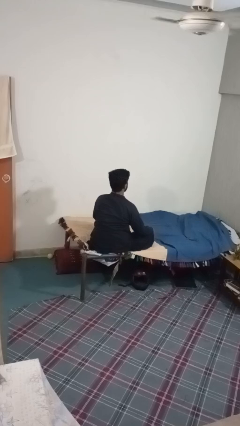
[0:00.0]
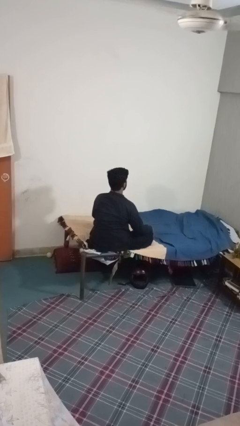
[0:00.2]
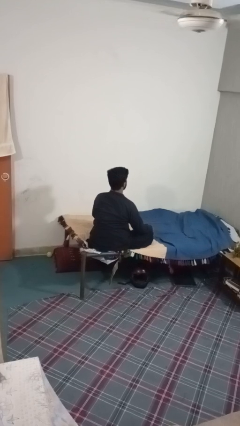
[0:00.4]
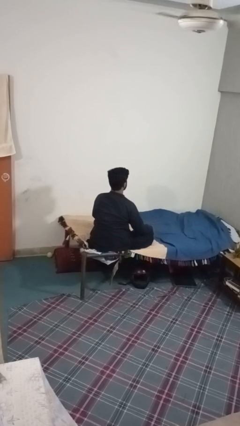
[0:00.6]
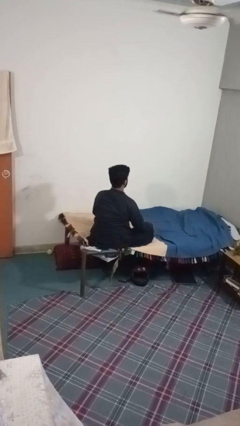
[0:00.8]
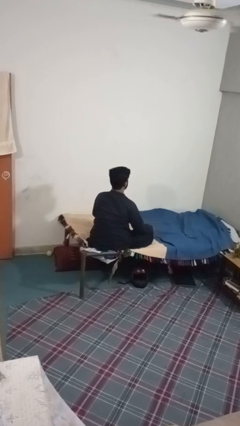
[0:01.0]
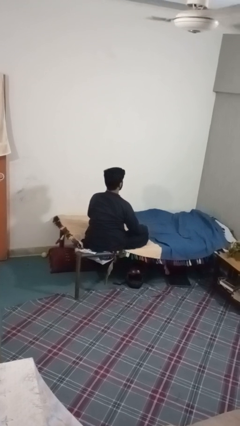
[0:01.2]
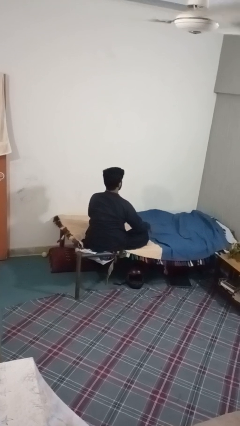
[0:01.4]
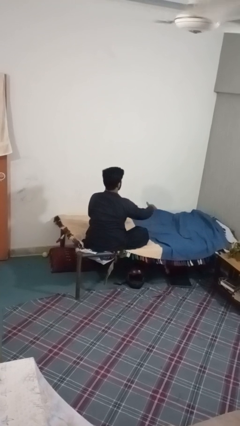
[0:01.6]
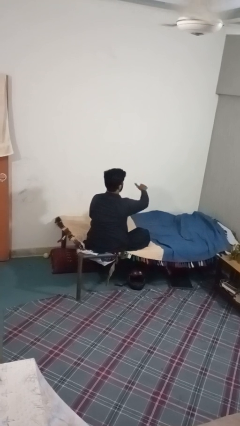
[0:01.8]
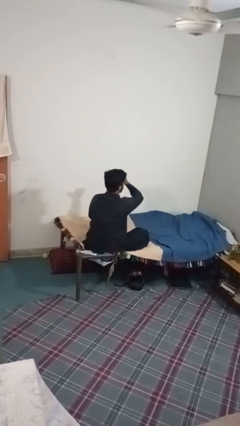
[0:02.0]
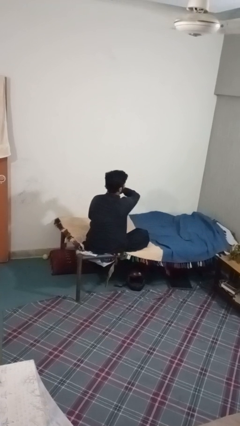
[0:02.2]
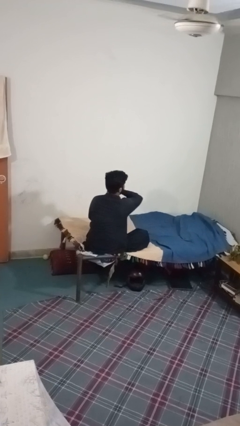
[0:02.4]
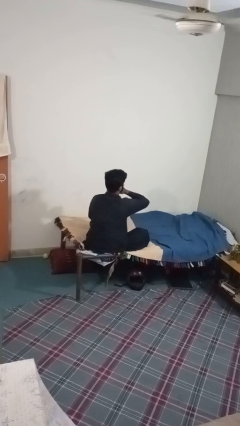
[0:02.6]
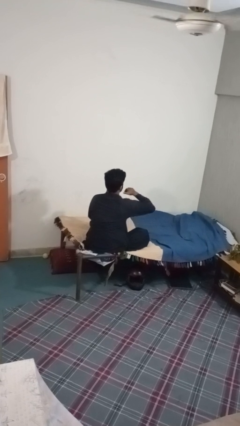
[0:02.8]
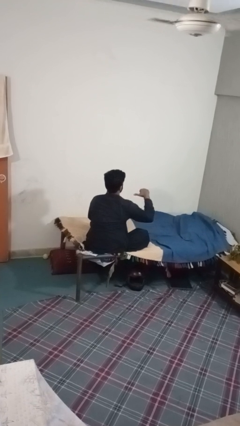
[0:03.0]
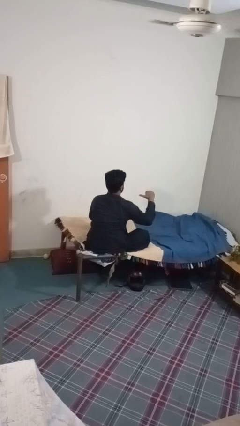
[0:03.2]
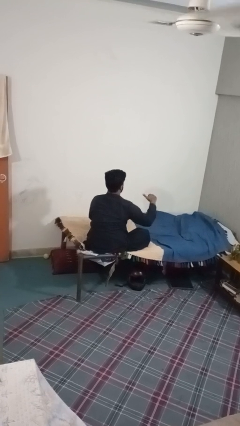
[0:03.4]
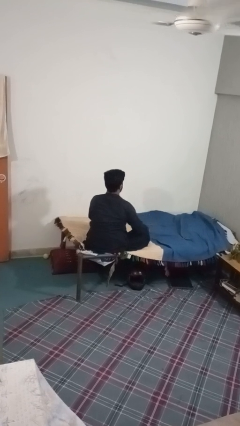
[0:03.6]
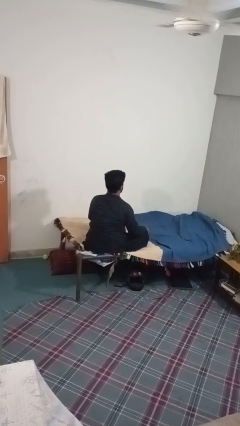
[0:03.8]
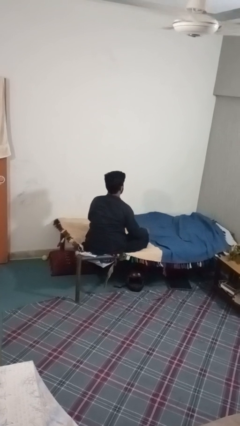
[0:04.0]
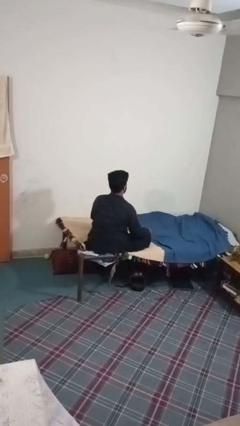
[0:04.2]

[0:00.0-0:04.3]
person gestures cut

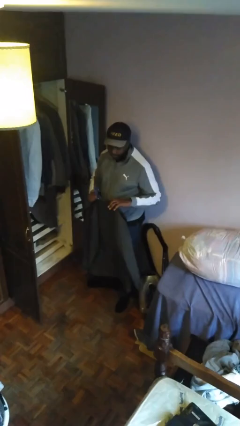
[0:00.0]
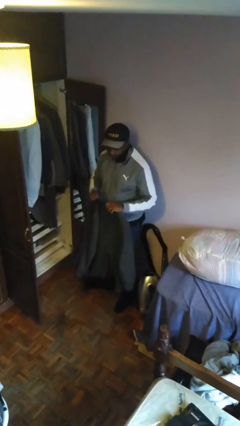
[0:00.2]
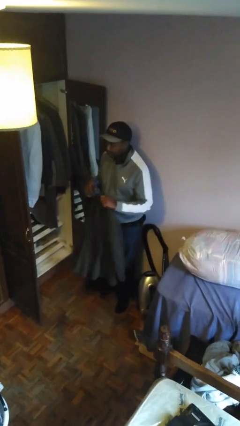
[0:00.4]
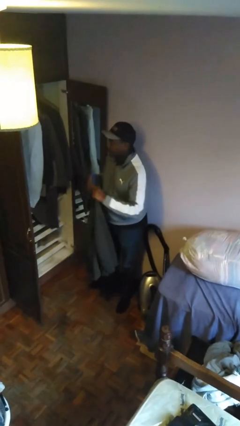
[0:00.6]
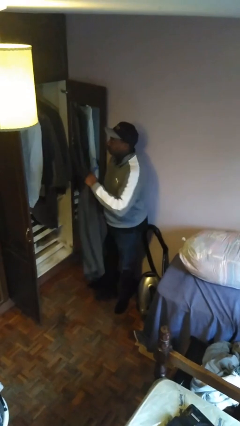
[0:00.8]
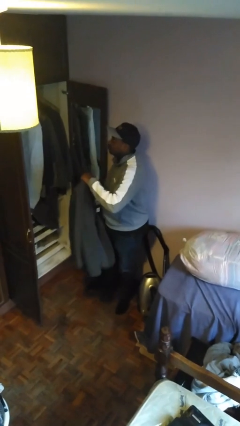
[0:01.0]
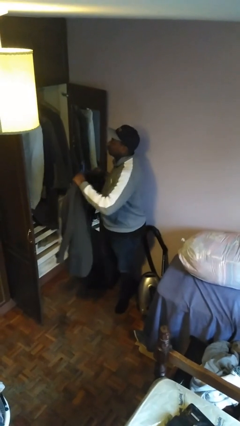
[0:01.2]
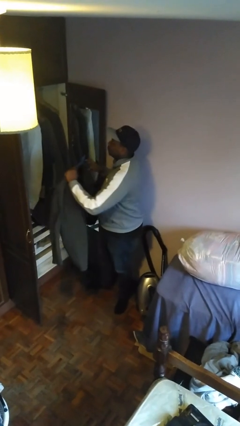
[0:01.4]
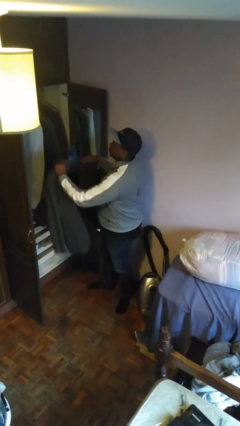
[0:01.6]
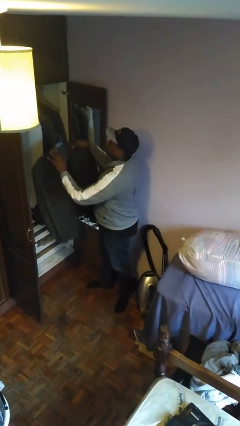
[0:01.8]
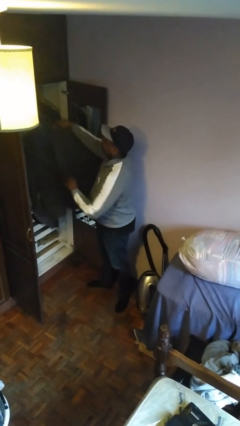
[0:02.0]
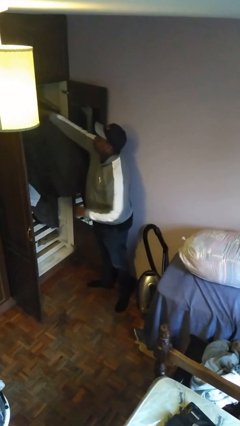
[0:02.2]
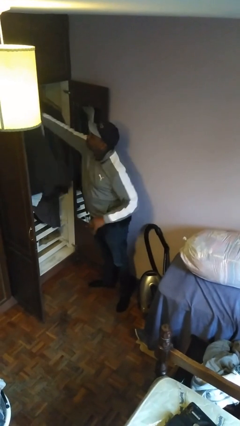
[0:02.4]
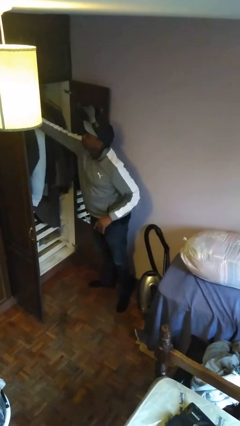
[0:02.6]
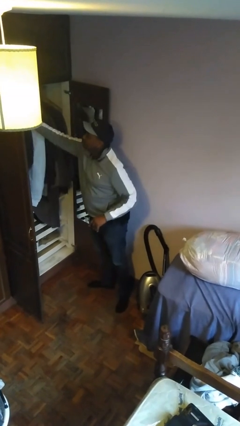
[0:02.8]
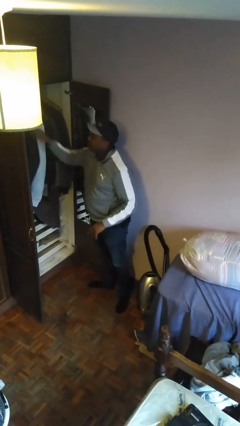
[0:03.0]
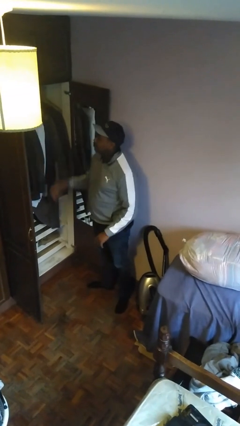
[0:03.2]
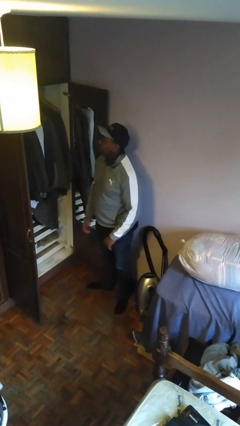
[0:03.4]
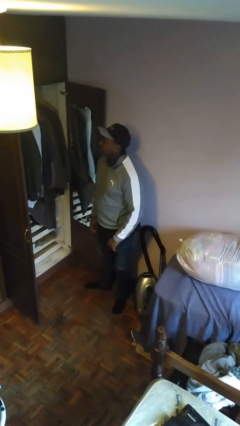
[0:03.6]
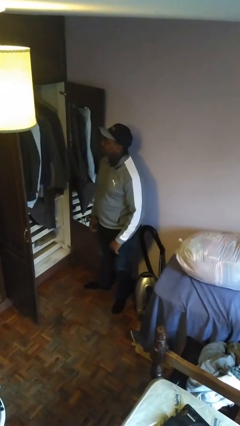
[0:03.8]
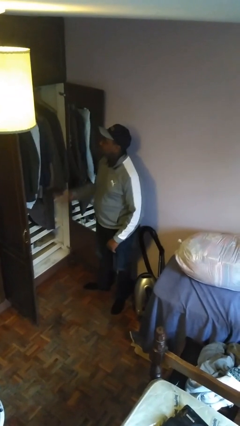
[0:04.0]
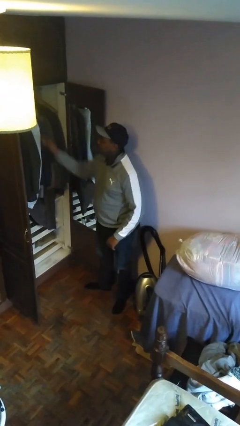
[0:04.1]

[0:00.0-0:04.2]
person puts clothes into closet

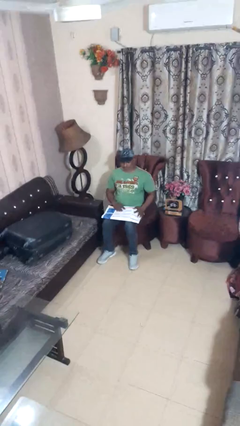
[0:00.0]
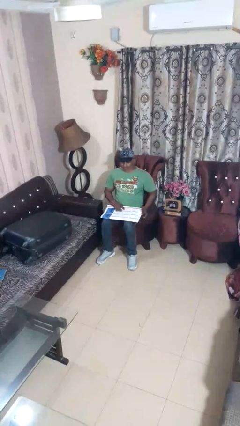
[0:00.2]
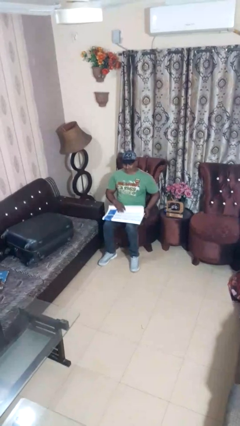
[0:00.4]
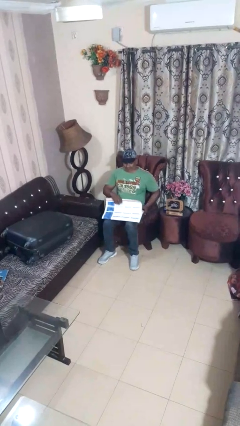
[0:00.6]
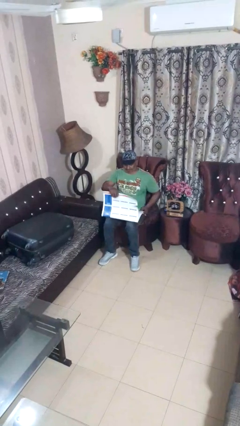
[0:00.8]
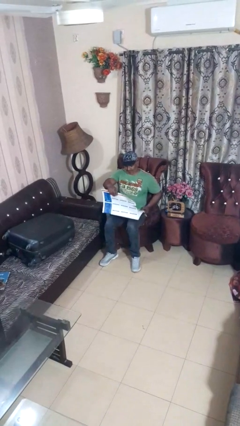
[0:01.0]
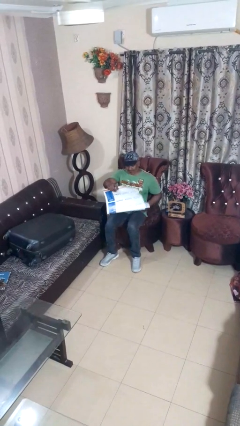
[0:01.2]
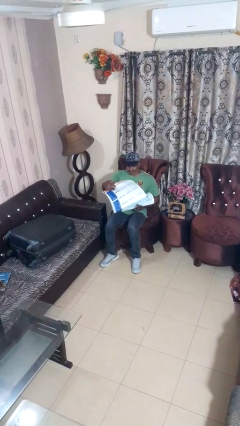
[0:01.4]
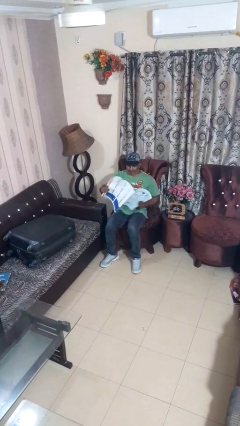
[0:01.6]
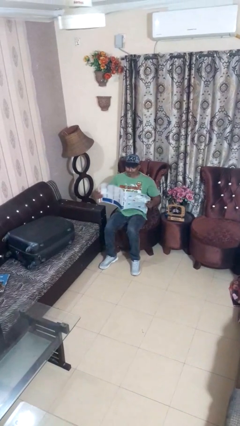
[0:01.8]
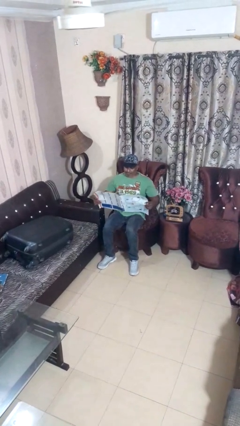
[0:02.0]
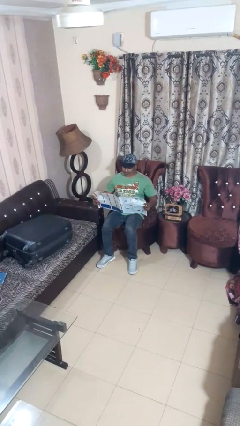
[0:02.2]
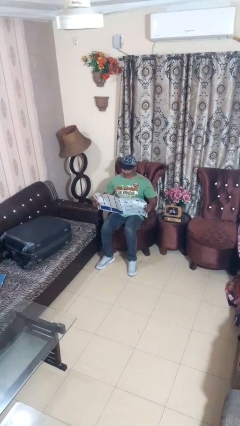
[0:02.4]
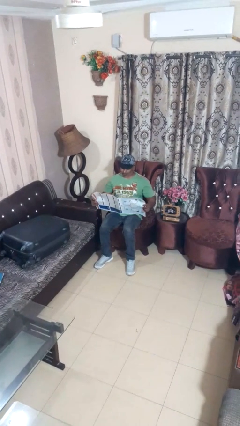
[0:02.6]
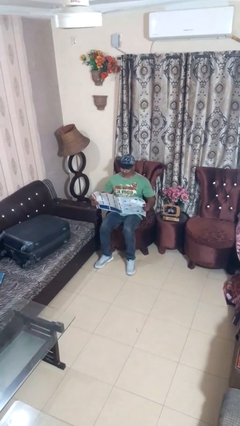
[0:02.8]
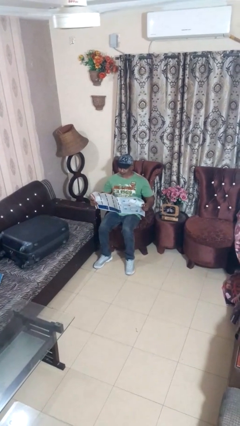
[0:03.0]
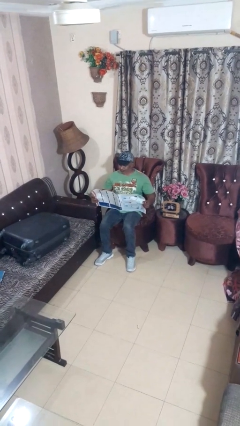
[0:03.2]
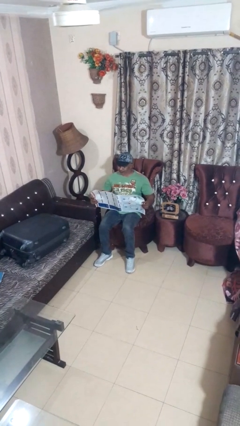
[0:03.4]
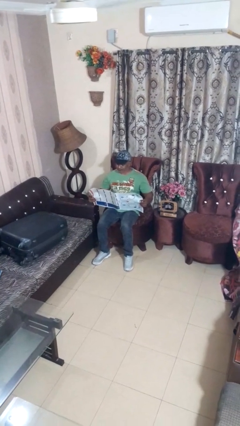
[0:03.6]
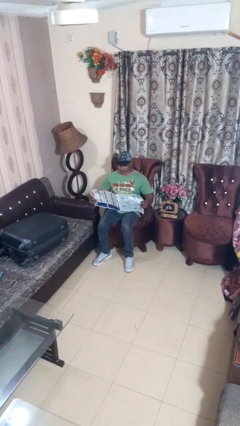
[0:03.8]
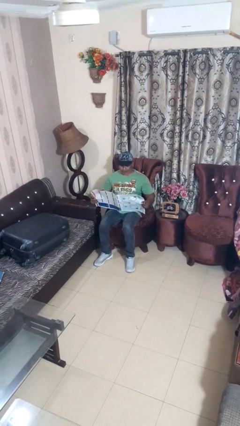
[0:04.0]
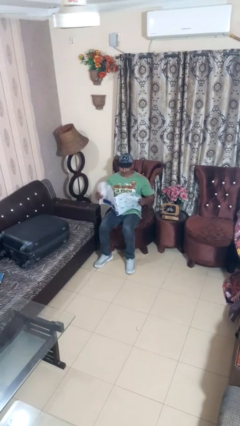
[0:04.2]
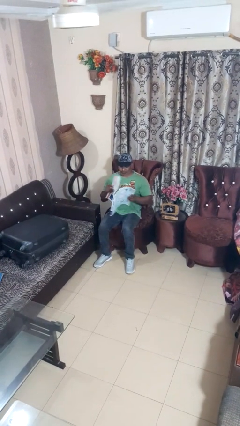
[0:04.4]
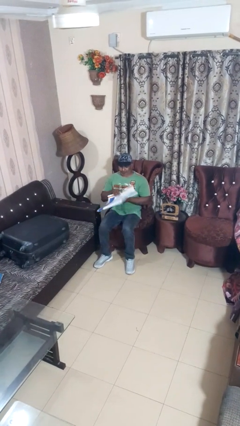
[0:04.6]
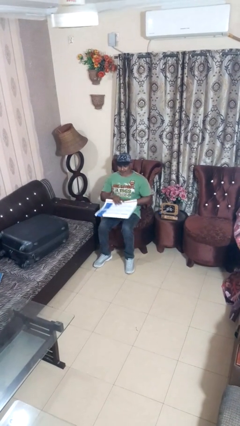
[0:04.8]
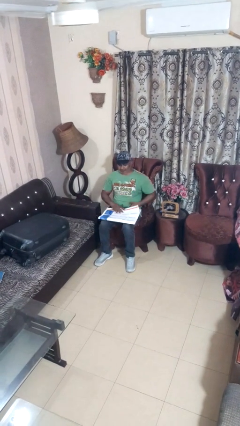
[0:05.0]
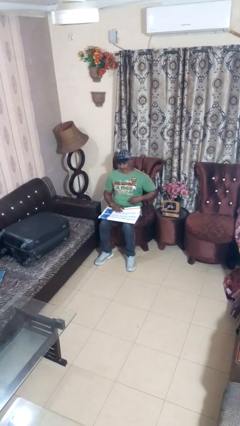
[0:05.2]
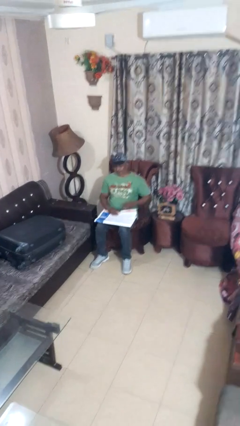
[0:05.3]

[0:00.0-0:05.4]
person reads newspaper

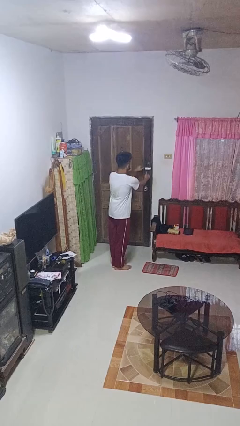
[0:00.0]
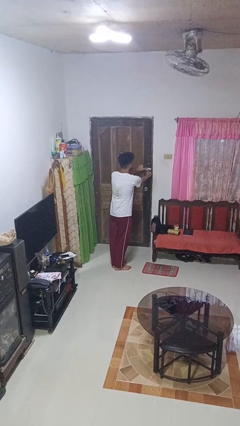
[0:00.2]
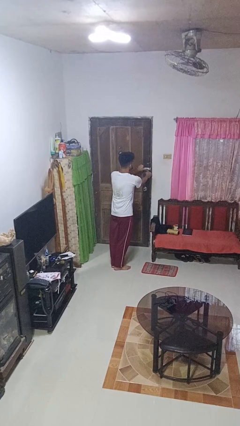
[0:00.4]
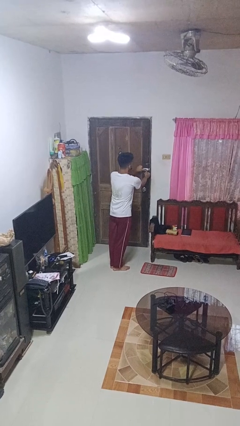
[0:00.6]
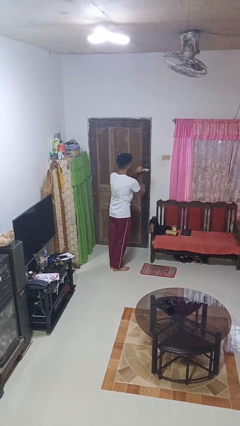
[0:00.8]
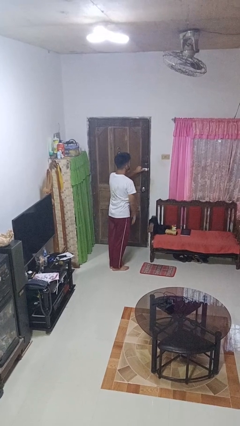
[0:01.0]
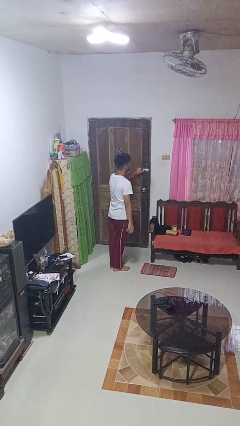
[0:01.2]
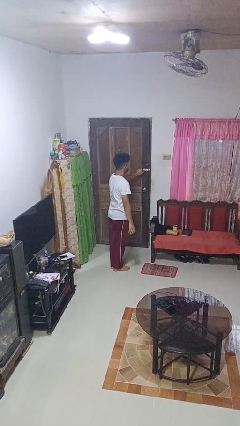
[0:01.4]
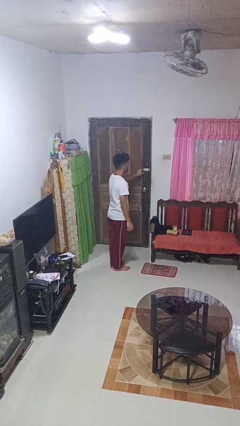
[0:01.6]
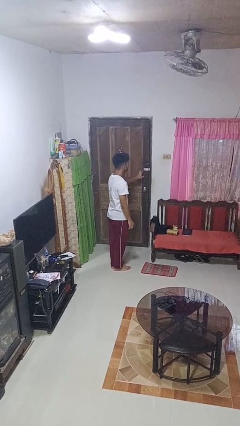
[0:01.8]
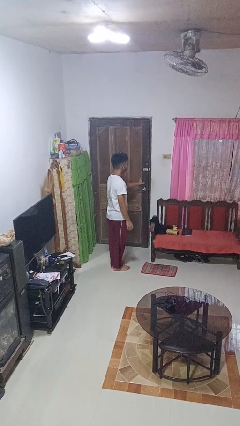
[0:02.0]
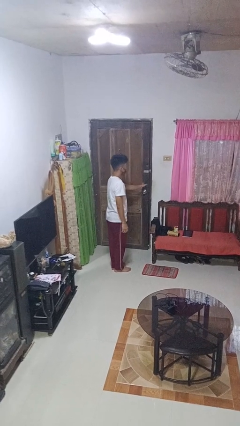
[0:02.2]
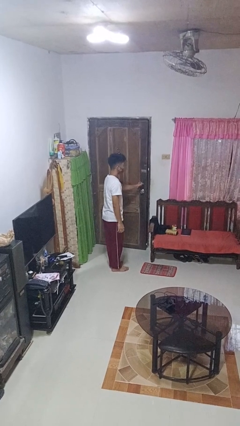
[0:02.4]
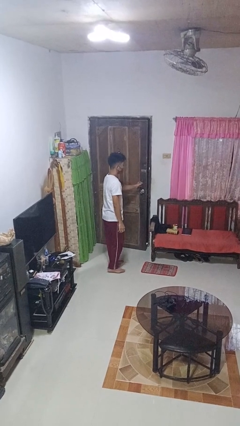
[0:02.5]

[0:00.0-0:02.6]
person unlocks door with keys

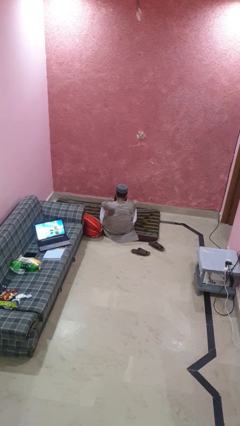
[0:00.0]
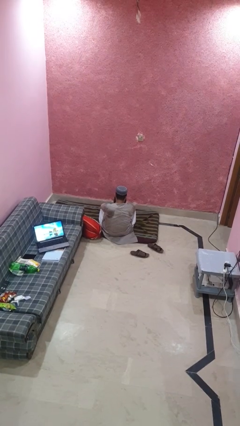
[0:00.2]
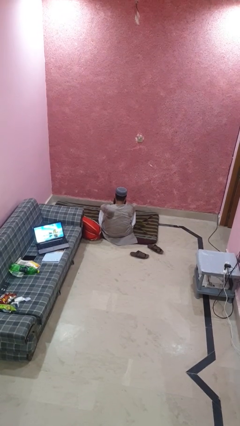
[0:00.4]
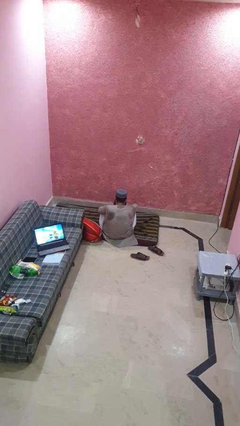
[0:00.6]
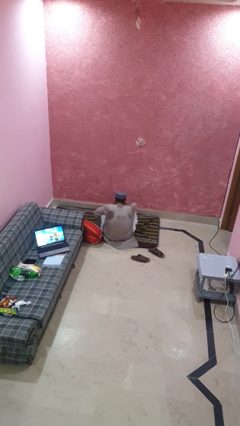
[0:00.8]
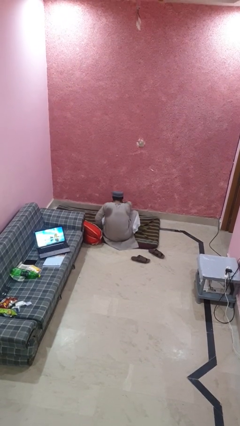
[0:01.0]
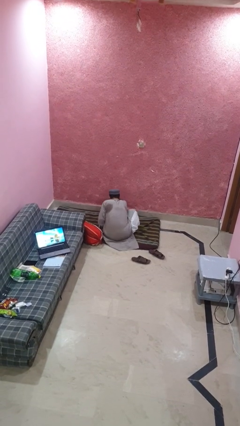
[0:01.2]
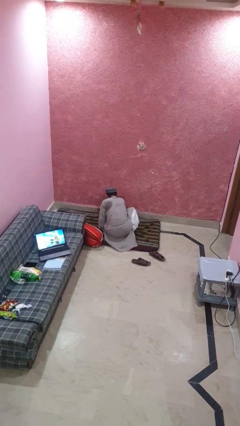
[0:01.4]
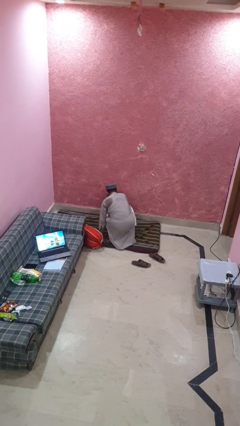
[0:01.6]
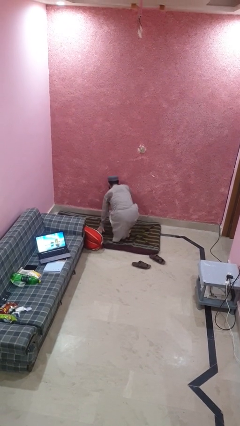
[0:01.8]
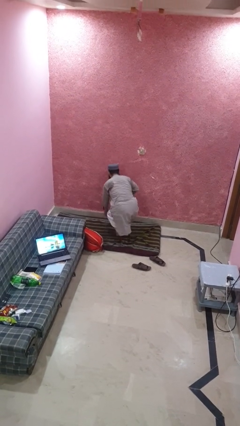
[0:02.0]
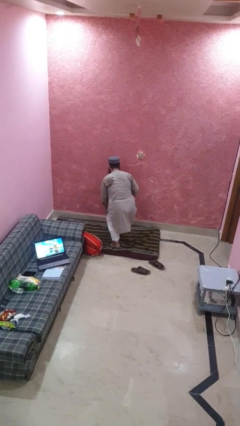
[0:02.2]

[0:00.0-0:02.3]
person stands up from floor
